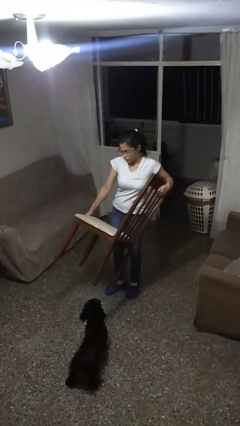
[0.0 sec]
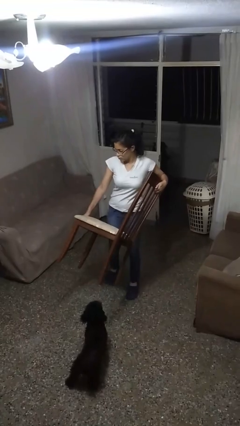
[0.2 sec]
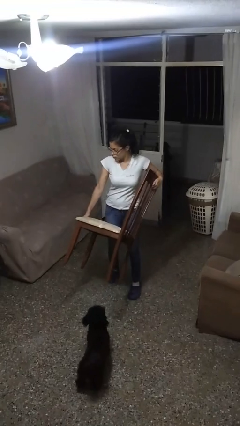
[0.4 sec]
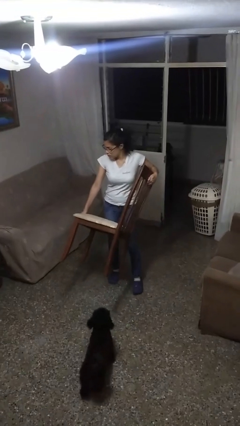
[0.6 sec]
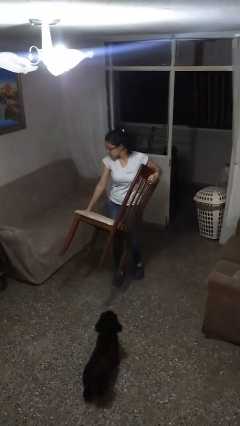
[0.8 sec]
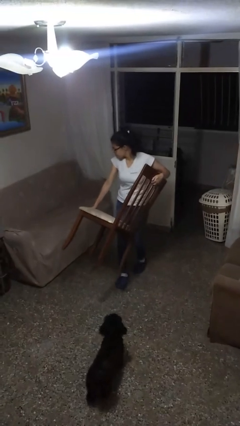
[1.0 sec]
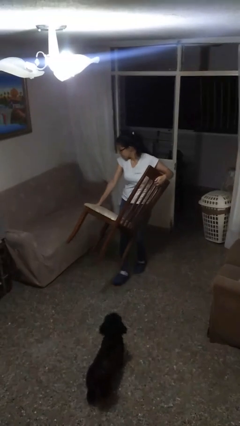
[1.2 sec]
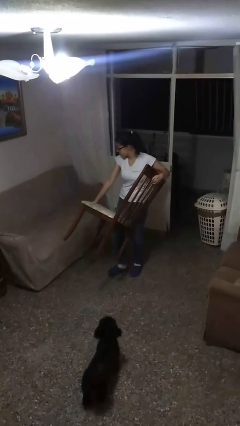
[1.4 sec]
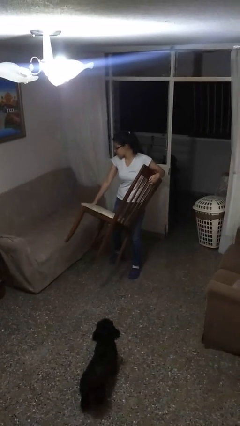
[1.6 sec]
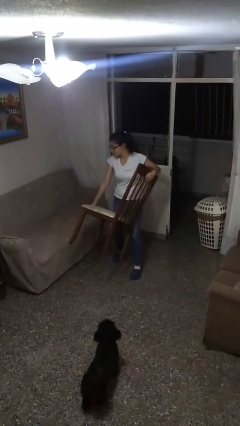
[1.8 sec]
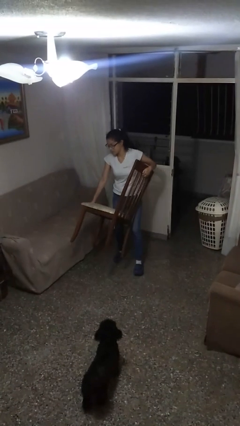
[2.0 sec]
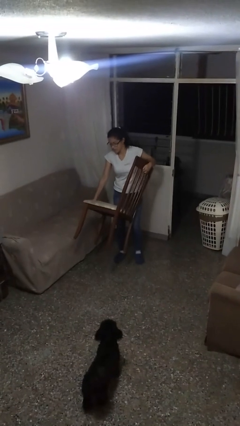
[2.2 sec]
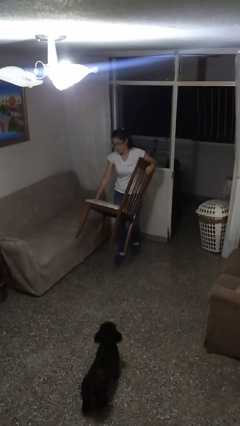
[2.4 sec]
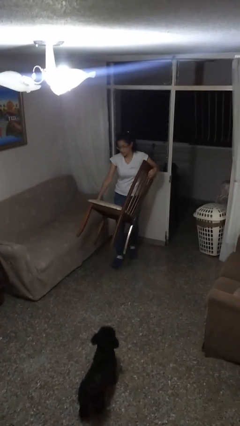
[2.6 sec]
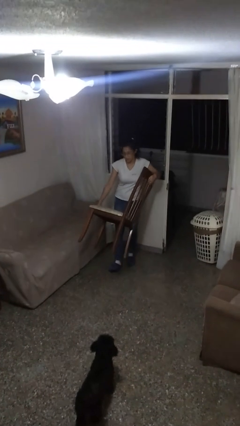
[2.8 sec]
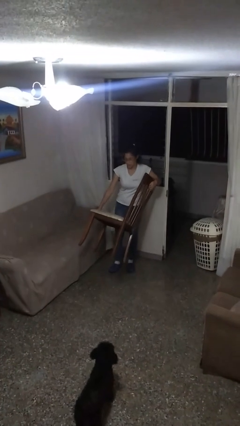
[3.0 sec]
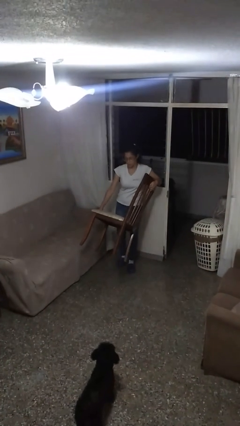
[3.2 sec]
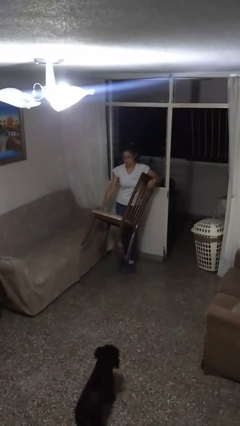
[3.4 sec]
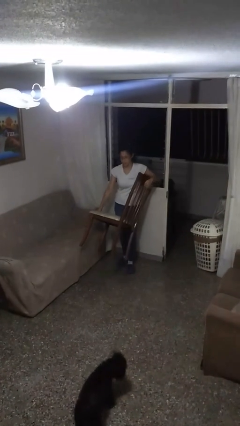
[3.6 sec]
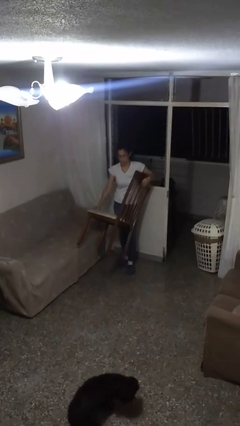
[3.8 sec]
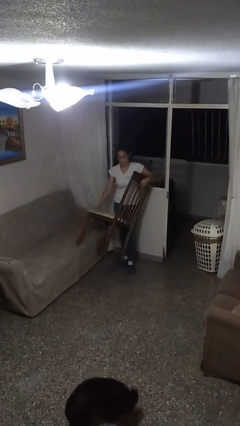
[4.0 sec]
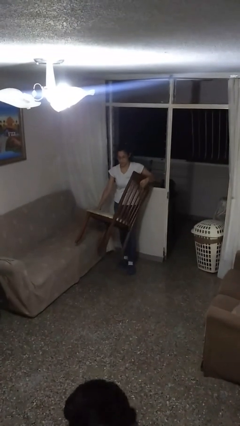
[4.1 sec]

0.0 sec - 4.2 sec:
person carries furniture

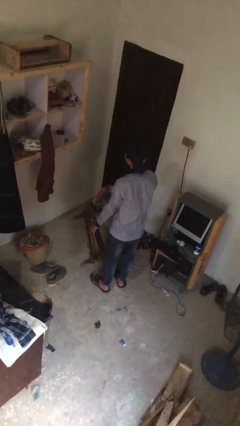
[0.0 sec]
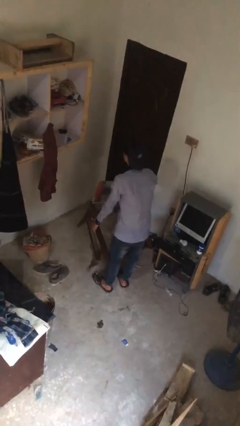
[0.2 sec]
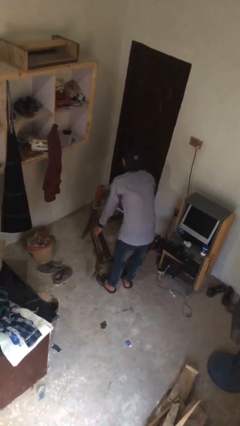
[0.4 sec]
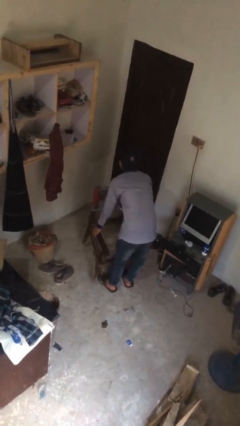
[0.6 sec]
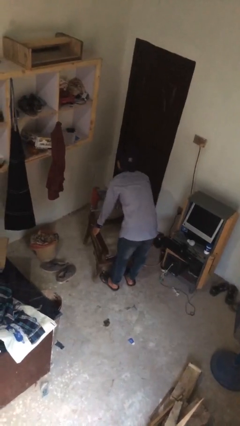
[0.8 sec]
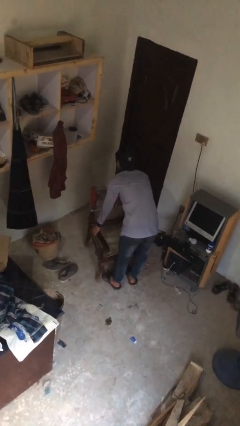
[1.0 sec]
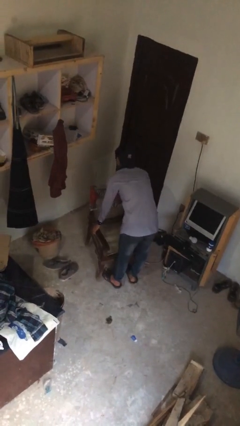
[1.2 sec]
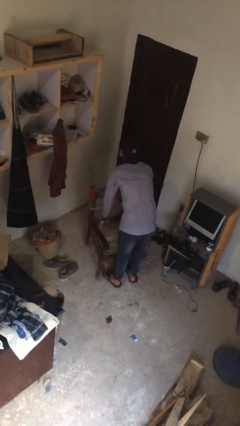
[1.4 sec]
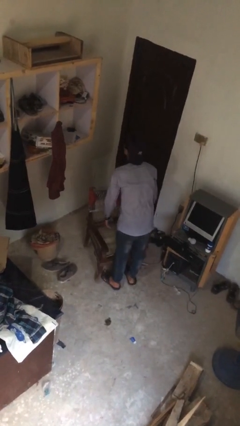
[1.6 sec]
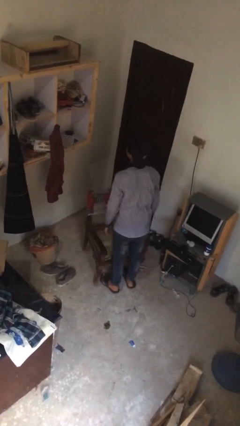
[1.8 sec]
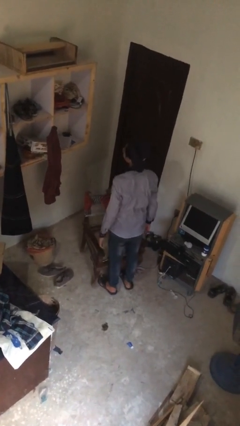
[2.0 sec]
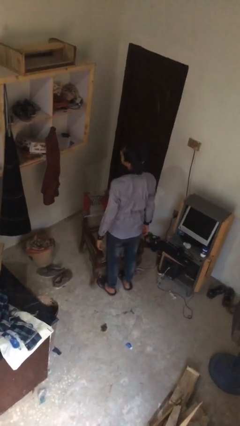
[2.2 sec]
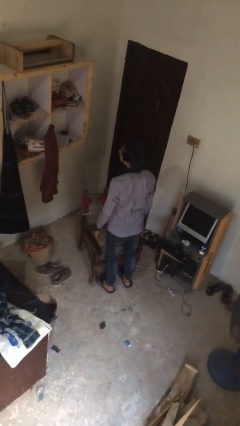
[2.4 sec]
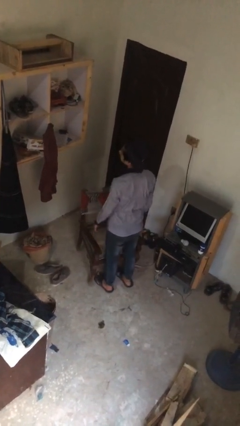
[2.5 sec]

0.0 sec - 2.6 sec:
person puts down object on floor

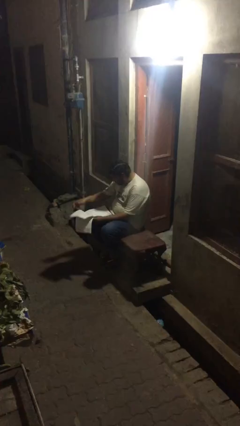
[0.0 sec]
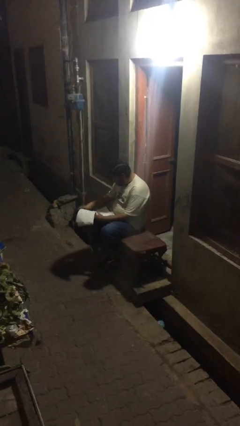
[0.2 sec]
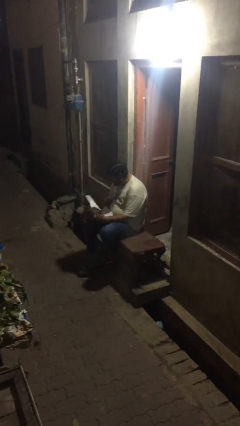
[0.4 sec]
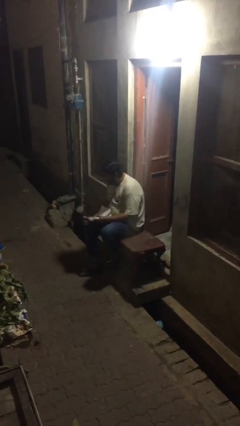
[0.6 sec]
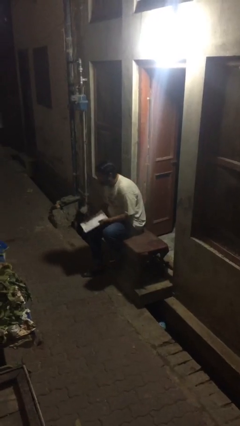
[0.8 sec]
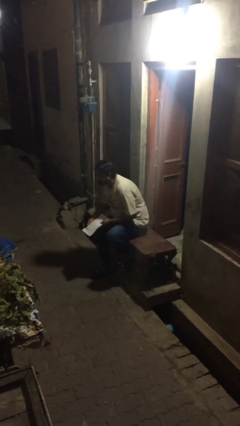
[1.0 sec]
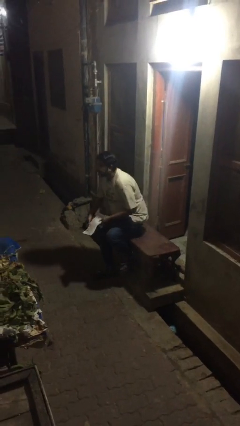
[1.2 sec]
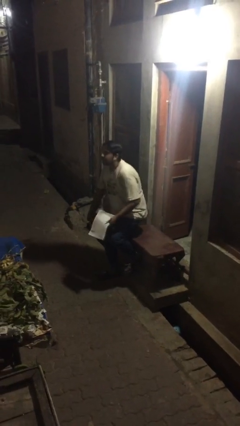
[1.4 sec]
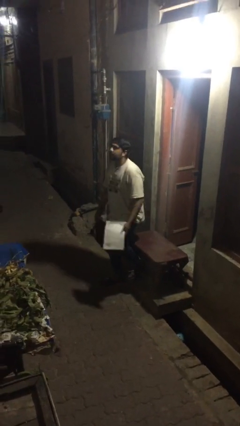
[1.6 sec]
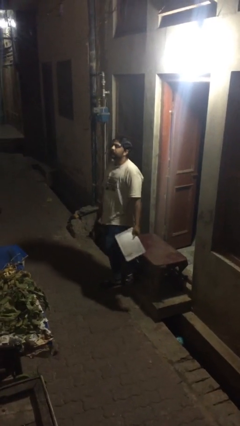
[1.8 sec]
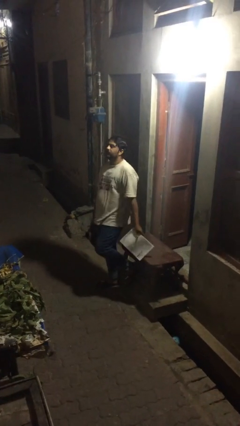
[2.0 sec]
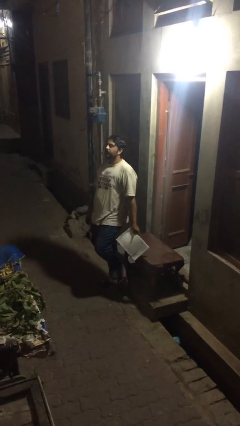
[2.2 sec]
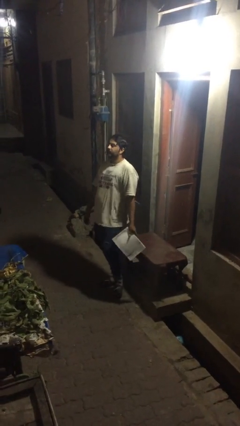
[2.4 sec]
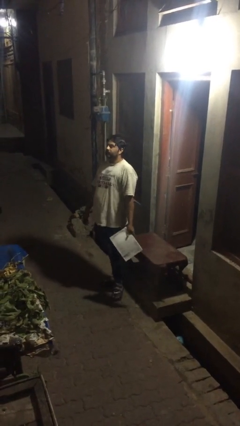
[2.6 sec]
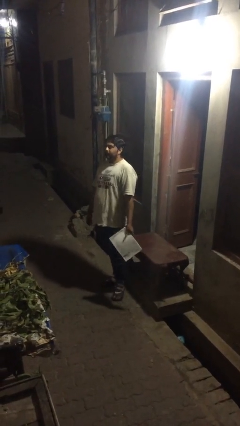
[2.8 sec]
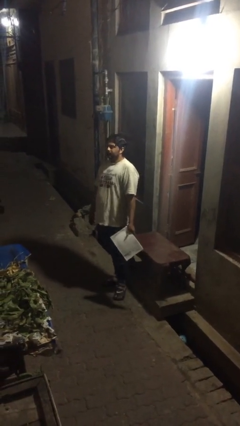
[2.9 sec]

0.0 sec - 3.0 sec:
person stands up

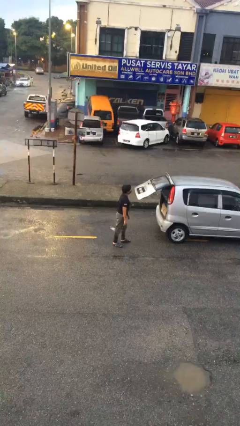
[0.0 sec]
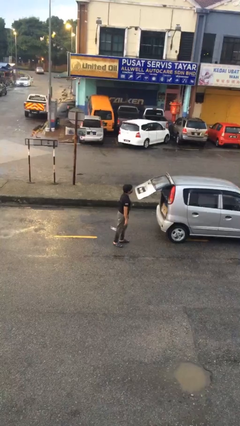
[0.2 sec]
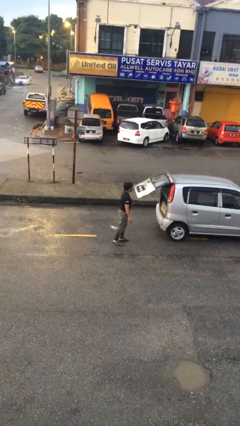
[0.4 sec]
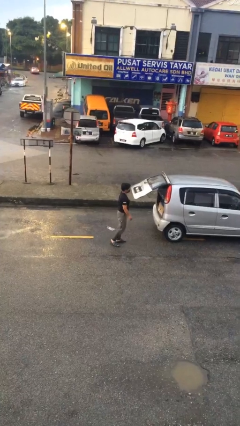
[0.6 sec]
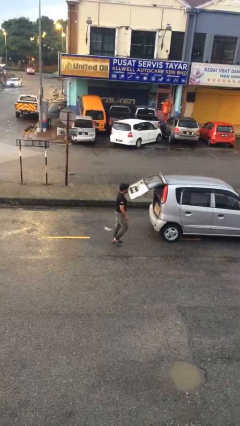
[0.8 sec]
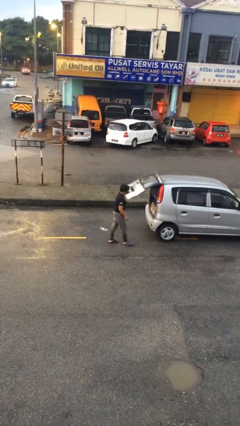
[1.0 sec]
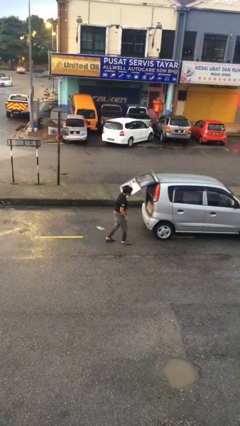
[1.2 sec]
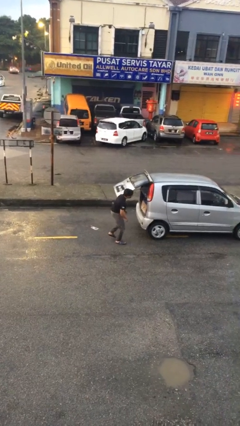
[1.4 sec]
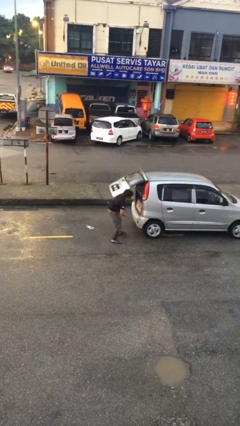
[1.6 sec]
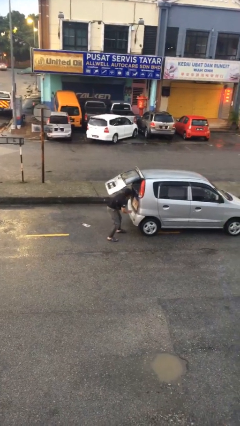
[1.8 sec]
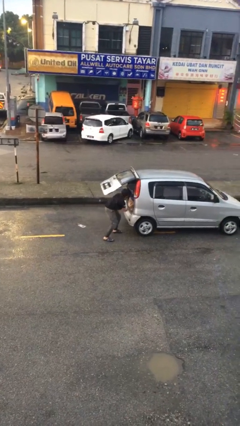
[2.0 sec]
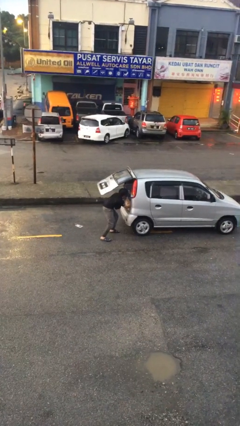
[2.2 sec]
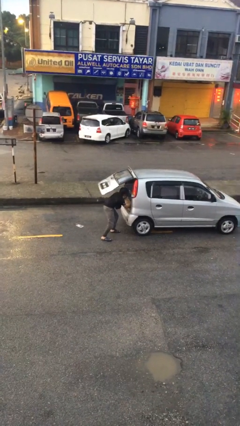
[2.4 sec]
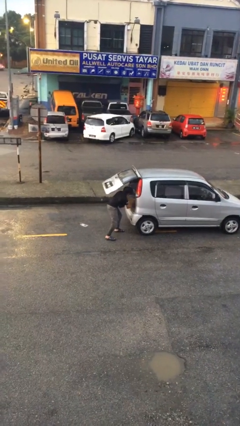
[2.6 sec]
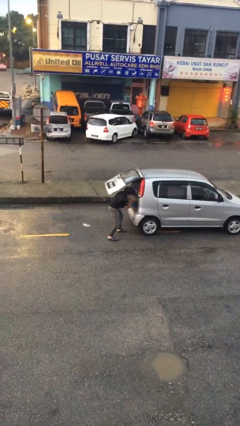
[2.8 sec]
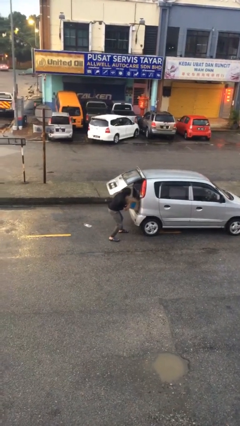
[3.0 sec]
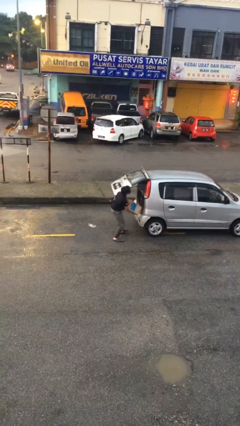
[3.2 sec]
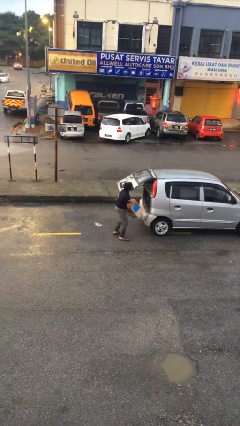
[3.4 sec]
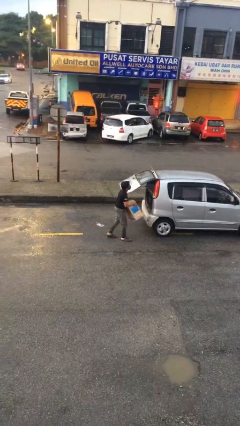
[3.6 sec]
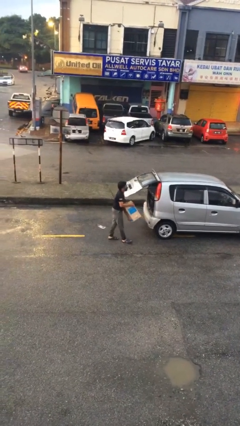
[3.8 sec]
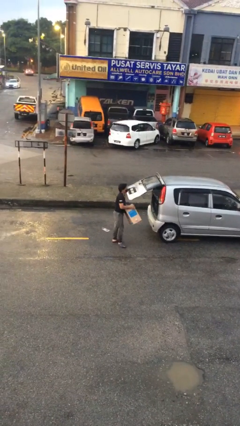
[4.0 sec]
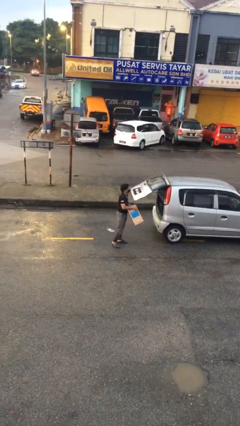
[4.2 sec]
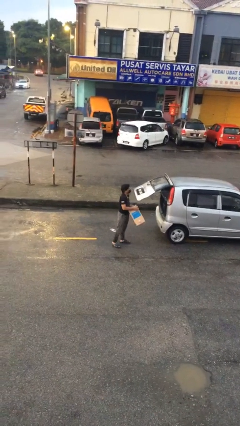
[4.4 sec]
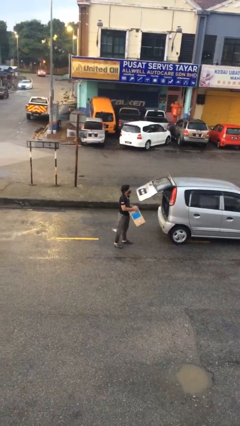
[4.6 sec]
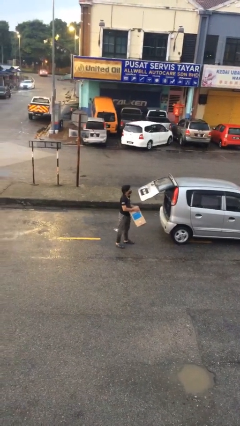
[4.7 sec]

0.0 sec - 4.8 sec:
person unloads car

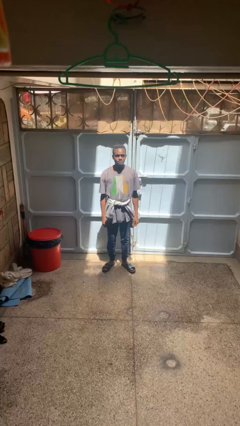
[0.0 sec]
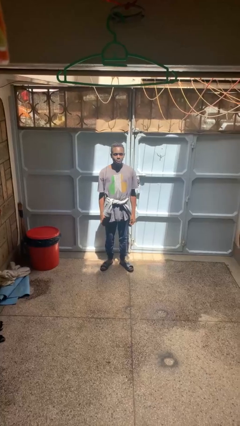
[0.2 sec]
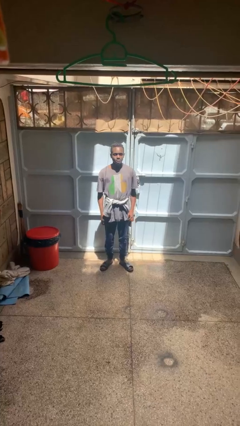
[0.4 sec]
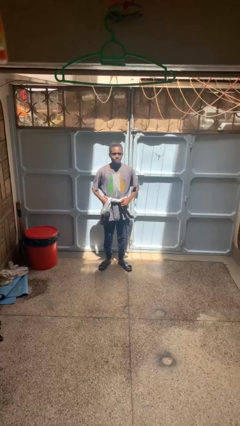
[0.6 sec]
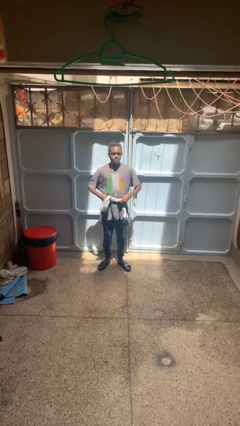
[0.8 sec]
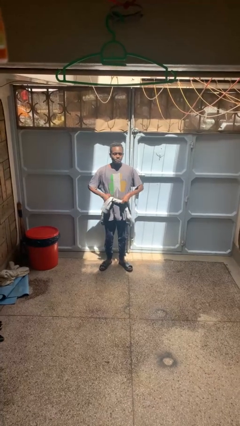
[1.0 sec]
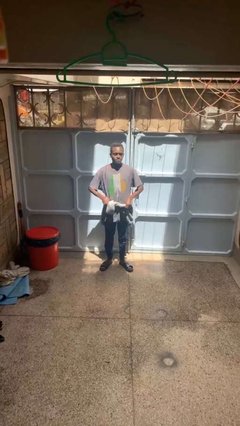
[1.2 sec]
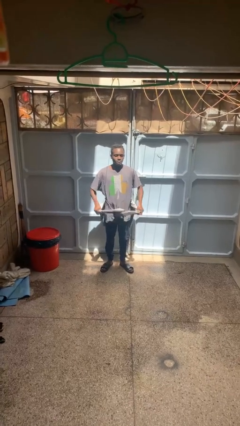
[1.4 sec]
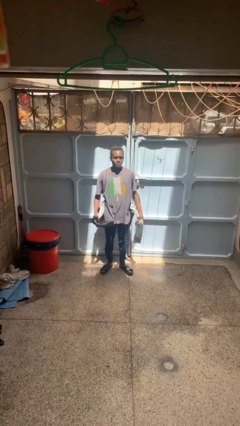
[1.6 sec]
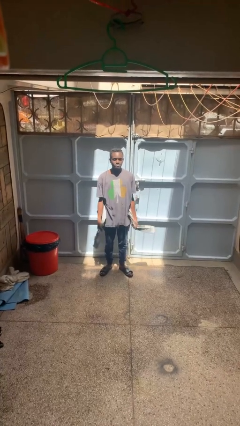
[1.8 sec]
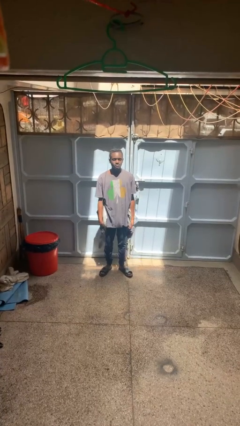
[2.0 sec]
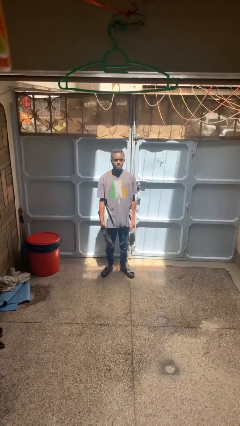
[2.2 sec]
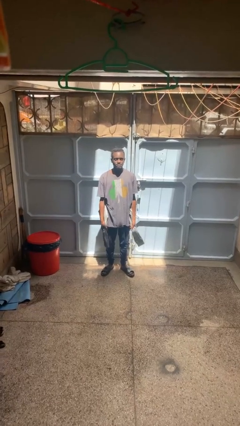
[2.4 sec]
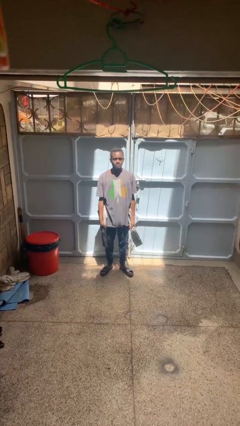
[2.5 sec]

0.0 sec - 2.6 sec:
person unties jacket around waist

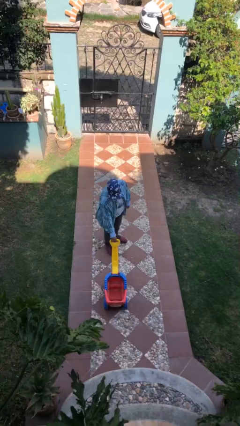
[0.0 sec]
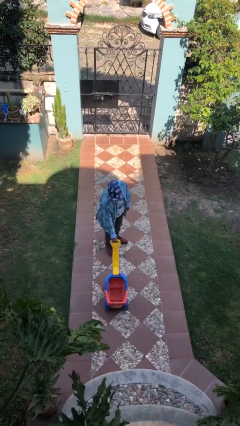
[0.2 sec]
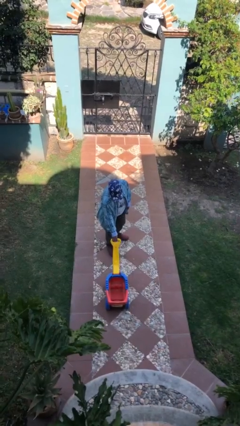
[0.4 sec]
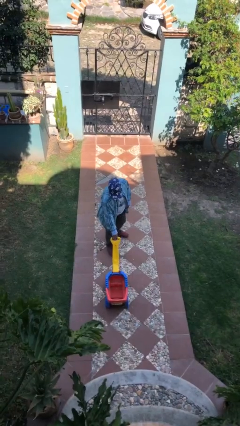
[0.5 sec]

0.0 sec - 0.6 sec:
person pulls wheeled cart
